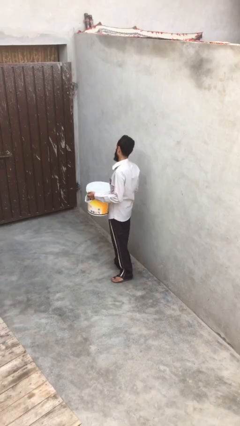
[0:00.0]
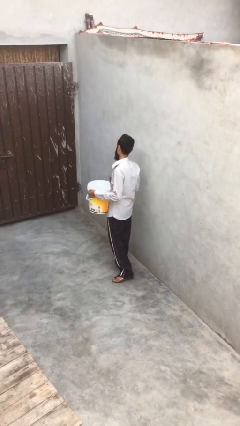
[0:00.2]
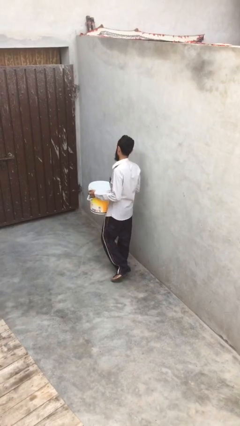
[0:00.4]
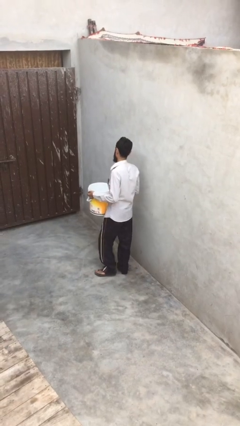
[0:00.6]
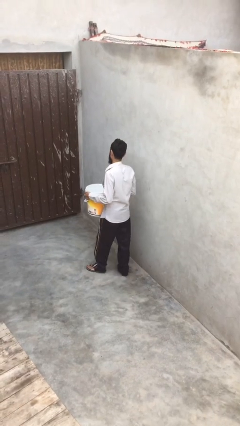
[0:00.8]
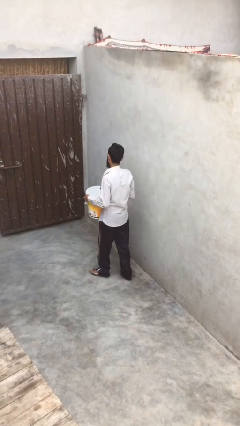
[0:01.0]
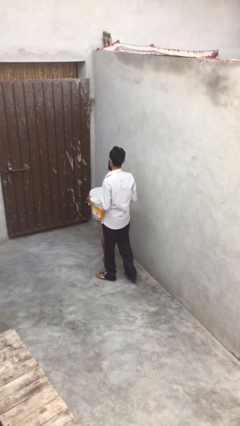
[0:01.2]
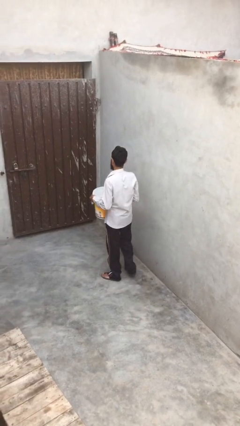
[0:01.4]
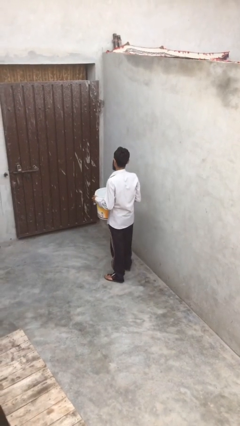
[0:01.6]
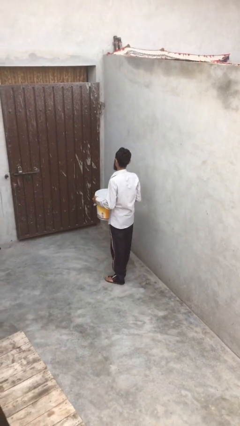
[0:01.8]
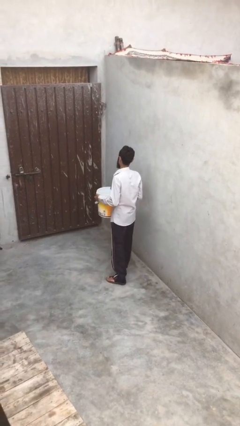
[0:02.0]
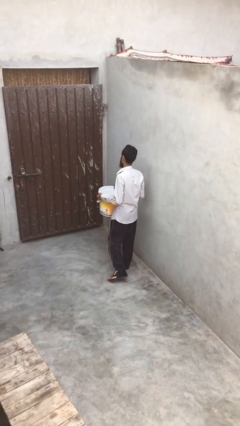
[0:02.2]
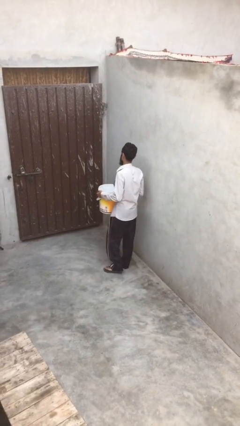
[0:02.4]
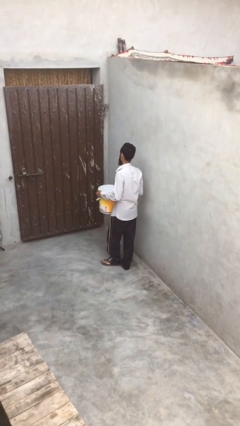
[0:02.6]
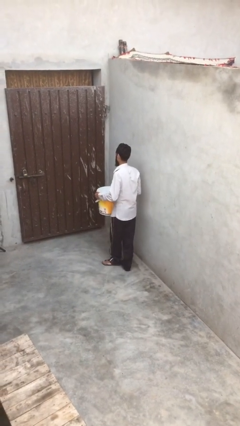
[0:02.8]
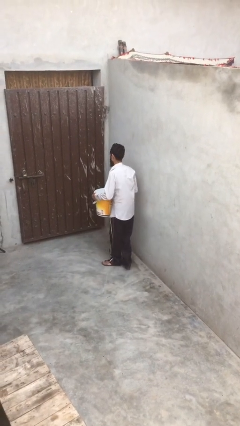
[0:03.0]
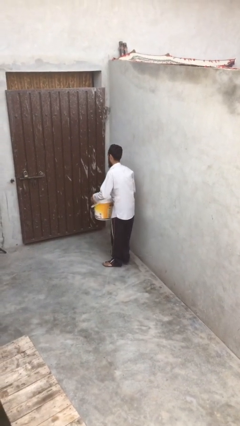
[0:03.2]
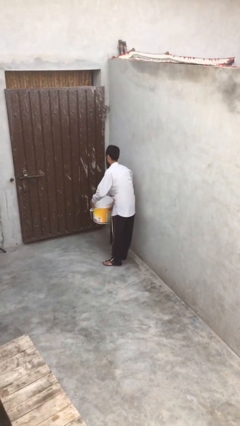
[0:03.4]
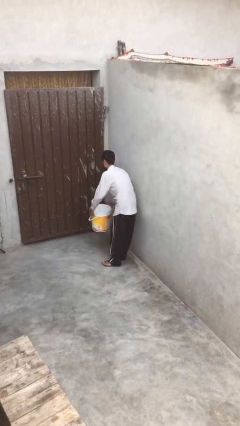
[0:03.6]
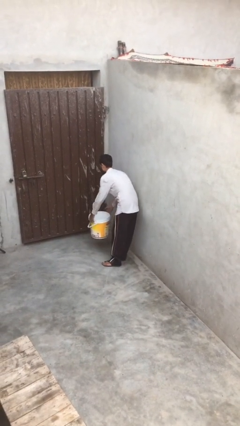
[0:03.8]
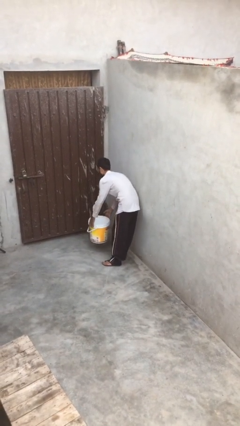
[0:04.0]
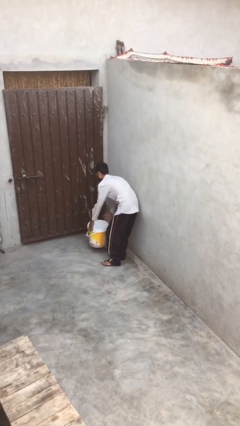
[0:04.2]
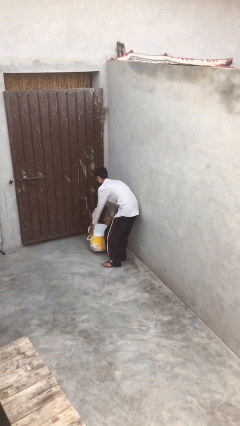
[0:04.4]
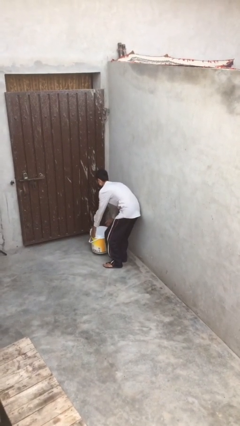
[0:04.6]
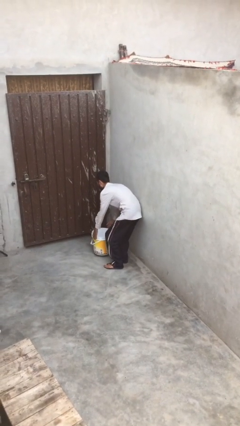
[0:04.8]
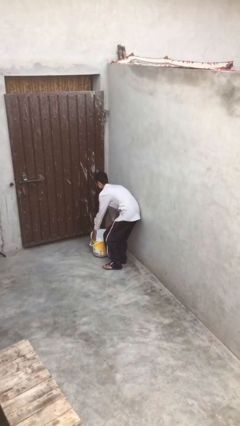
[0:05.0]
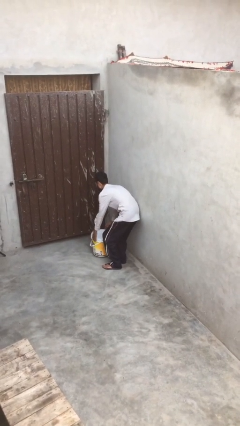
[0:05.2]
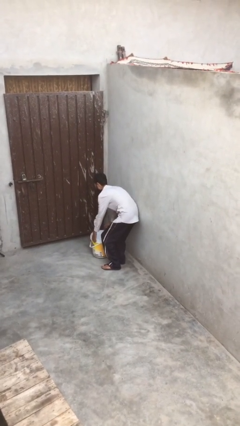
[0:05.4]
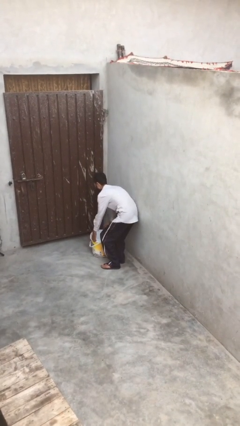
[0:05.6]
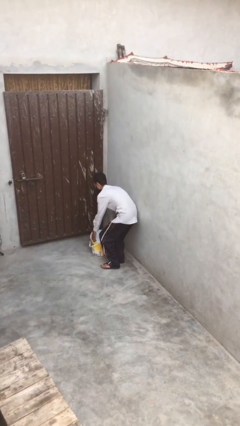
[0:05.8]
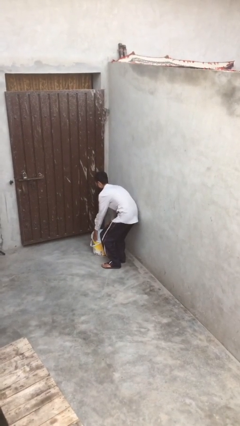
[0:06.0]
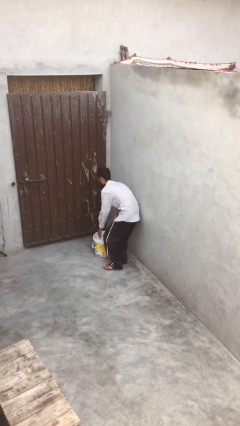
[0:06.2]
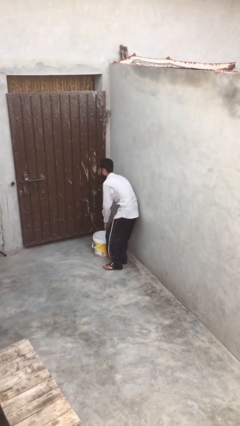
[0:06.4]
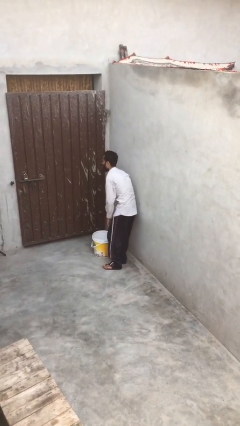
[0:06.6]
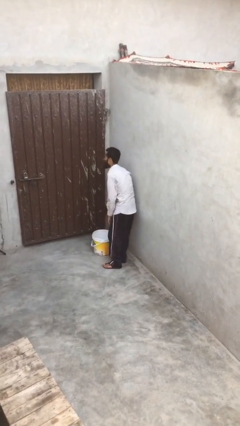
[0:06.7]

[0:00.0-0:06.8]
person puts down object on floor

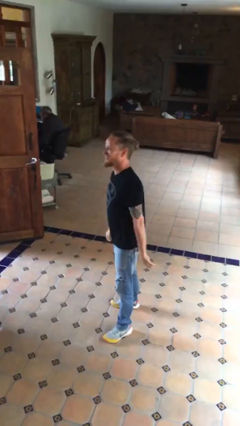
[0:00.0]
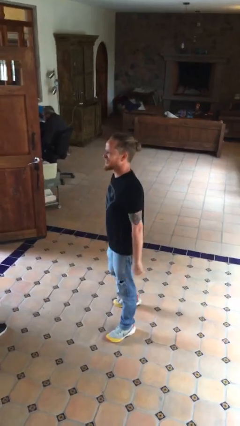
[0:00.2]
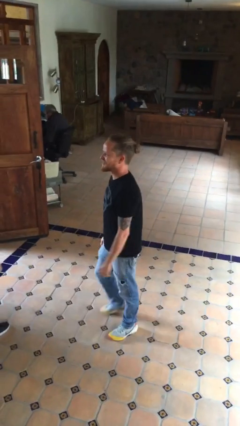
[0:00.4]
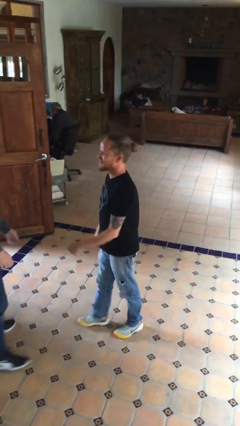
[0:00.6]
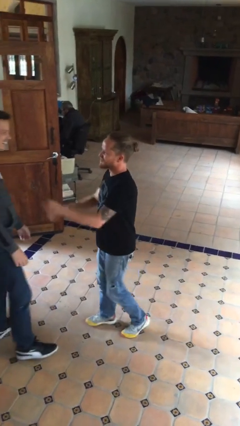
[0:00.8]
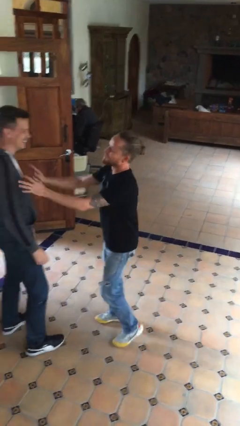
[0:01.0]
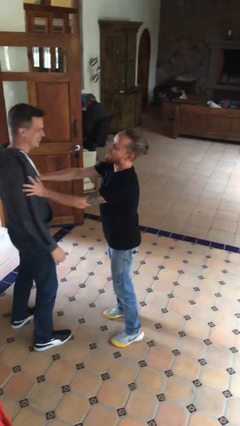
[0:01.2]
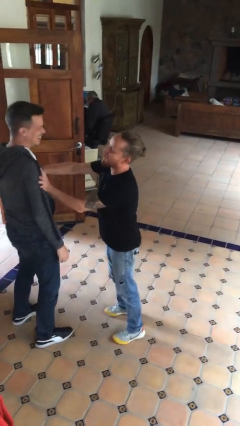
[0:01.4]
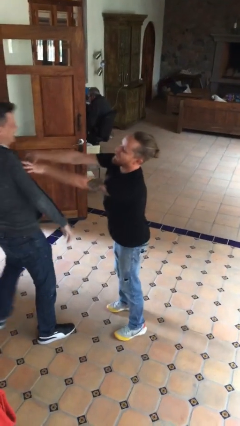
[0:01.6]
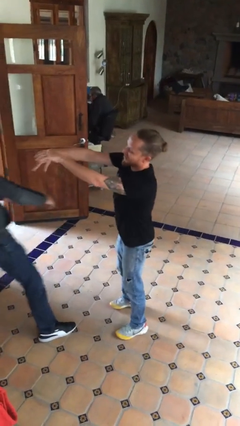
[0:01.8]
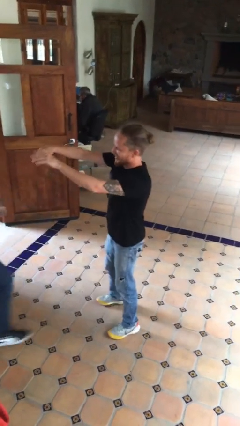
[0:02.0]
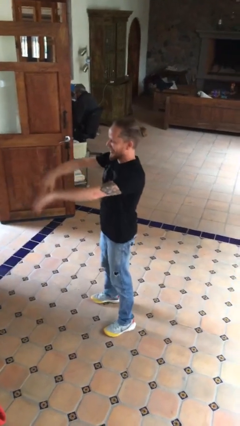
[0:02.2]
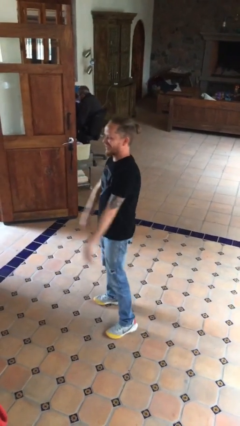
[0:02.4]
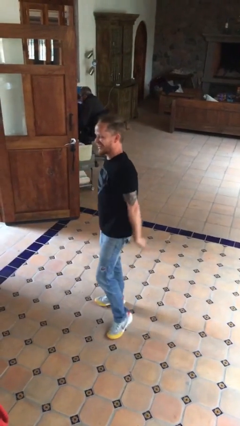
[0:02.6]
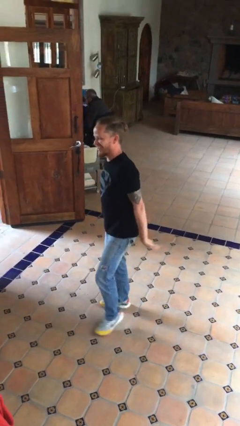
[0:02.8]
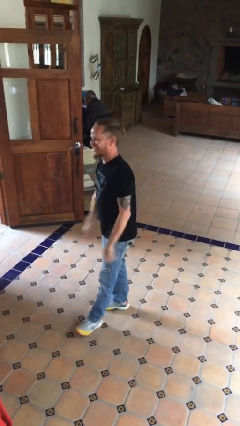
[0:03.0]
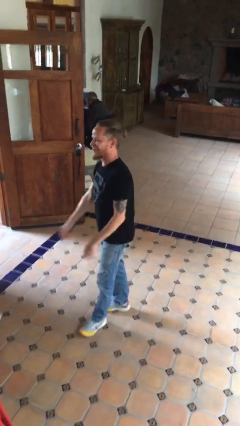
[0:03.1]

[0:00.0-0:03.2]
person shoves person

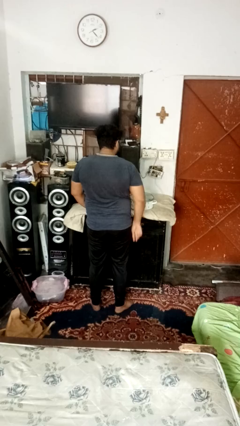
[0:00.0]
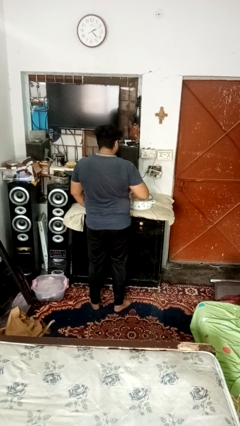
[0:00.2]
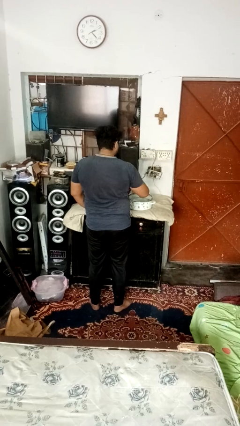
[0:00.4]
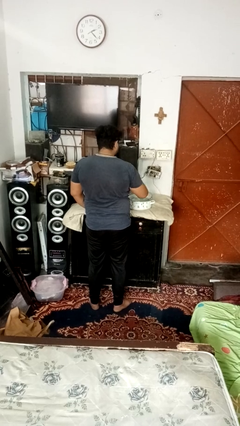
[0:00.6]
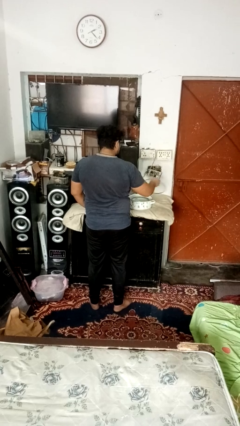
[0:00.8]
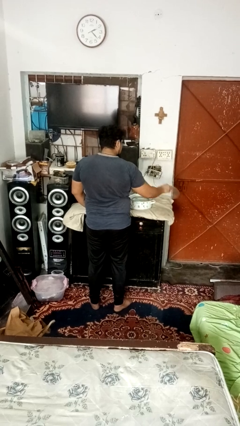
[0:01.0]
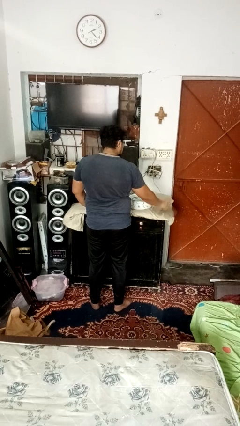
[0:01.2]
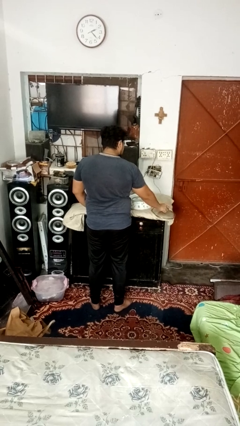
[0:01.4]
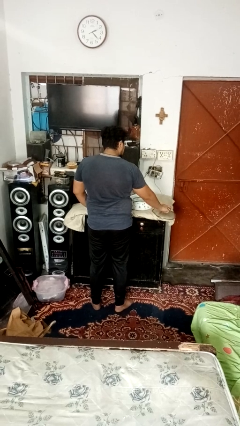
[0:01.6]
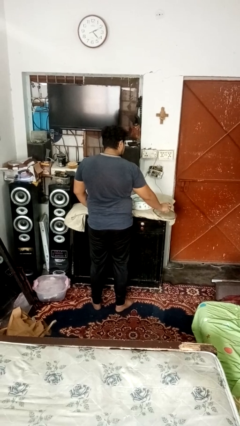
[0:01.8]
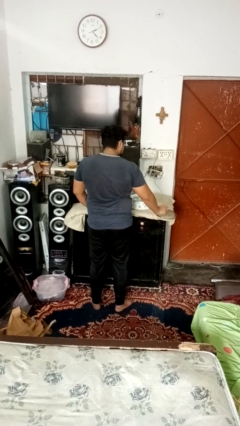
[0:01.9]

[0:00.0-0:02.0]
person opens jar

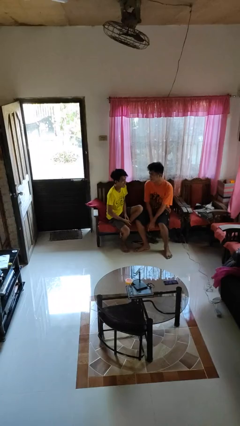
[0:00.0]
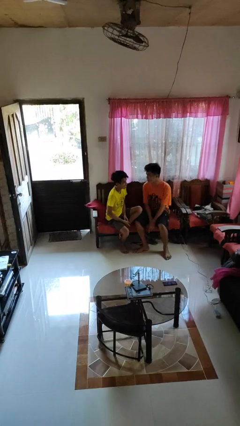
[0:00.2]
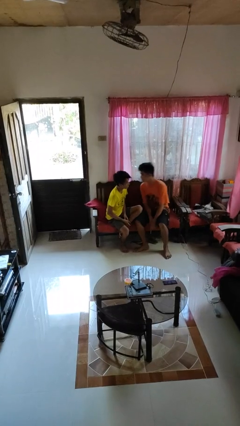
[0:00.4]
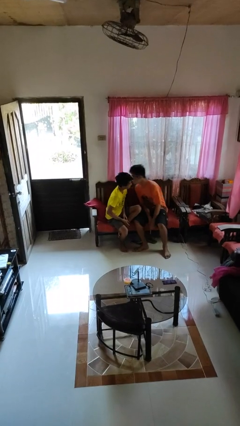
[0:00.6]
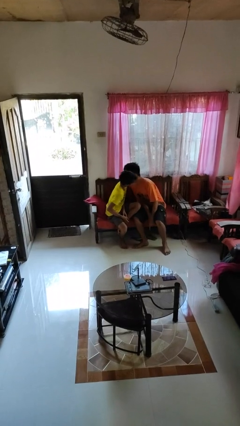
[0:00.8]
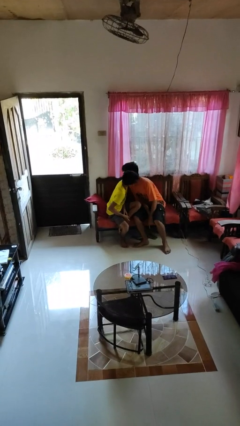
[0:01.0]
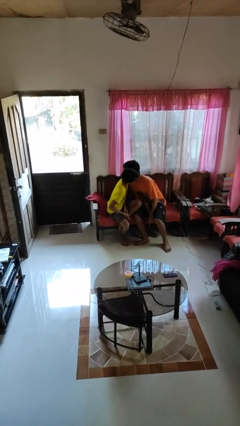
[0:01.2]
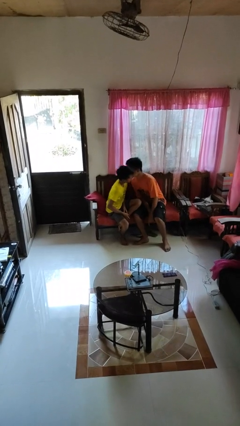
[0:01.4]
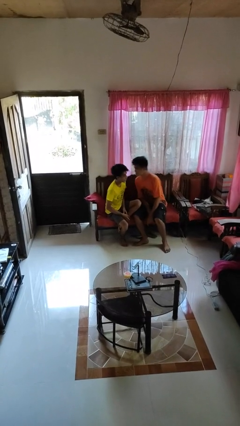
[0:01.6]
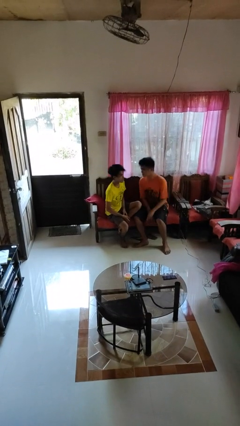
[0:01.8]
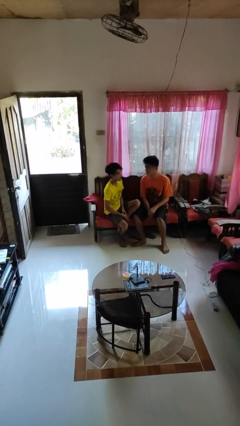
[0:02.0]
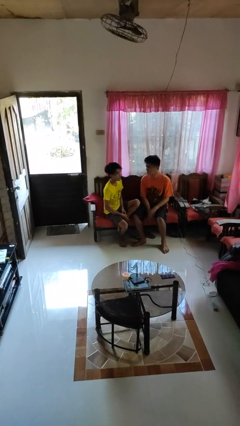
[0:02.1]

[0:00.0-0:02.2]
person kisses cheek of person

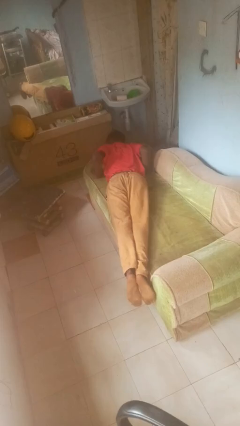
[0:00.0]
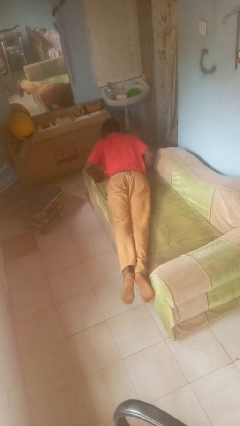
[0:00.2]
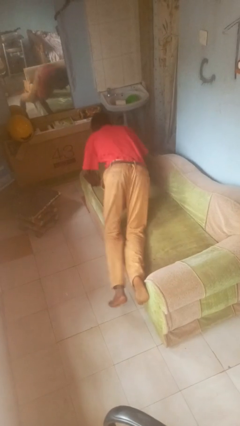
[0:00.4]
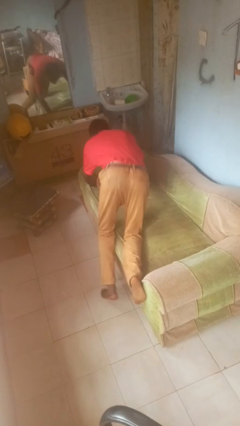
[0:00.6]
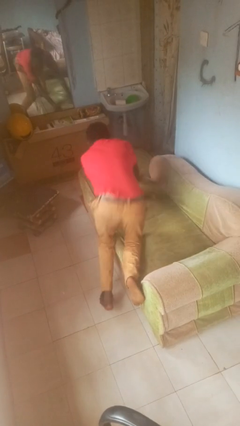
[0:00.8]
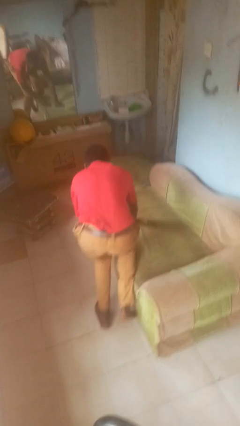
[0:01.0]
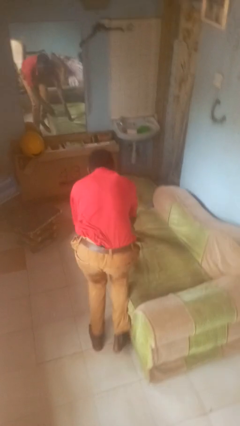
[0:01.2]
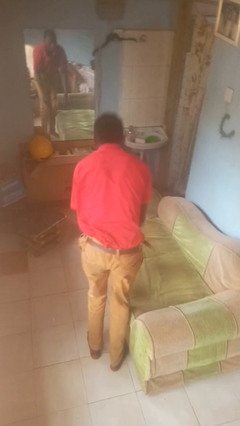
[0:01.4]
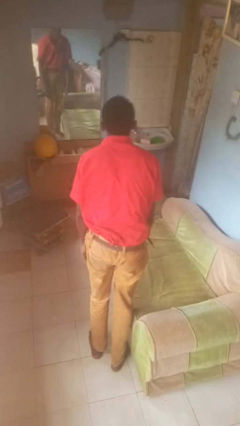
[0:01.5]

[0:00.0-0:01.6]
person stands up

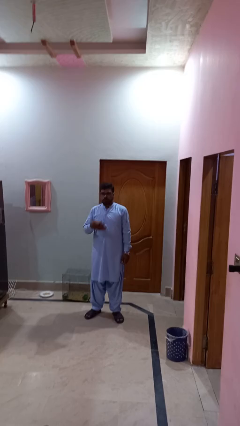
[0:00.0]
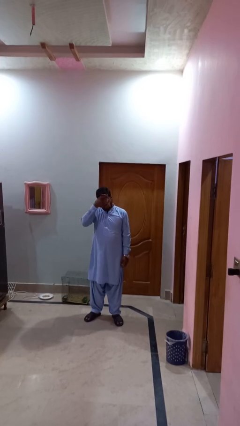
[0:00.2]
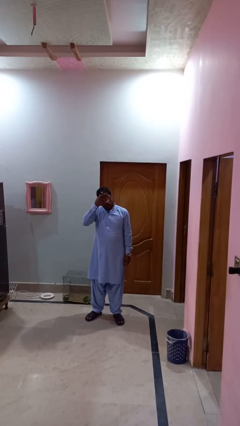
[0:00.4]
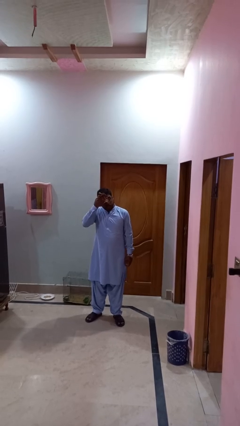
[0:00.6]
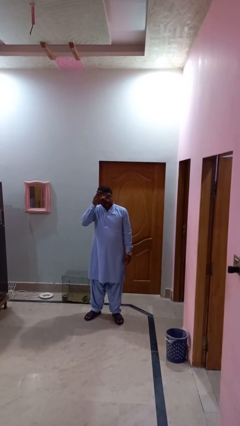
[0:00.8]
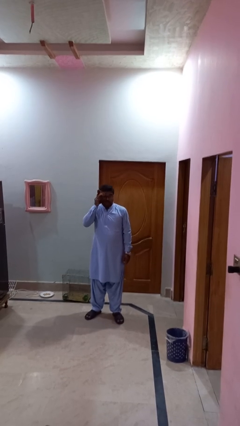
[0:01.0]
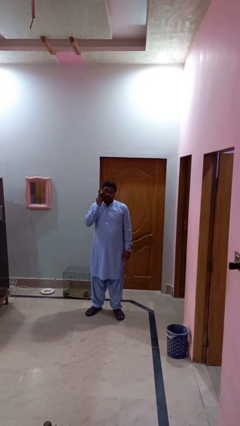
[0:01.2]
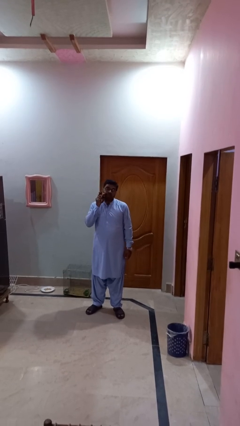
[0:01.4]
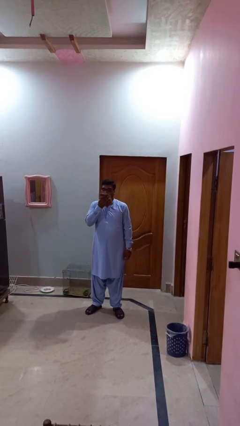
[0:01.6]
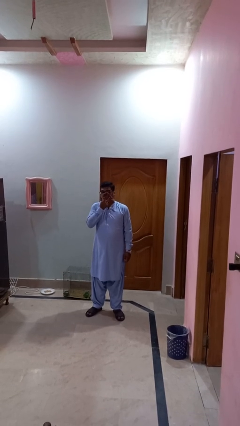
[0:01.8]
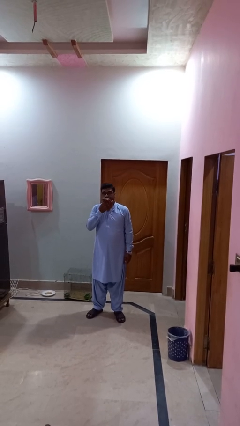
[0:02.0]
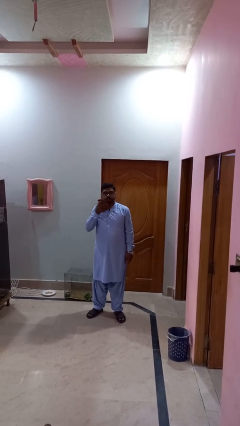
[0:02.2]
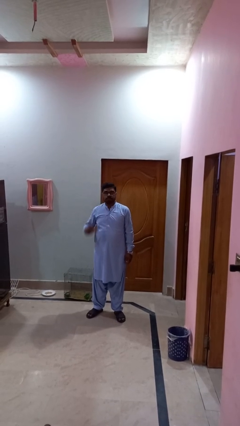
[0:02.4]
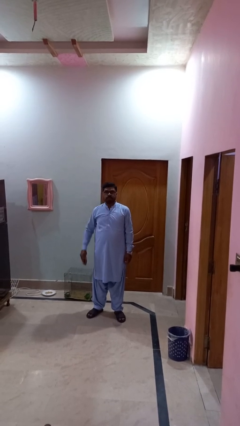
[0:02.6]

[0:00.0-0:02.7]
person wipes mouth with napkin
